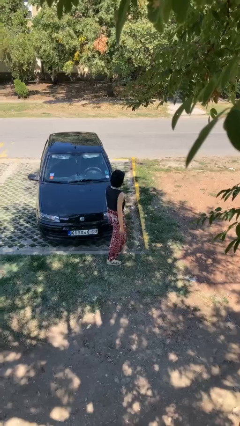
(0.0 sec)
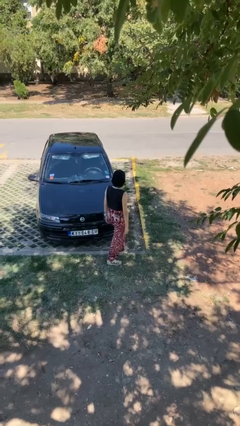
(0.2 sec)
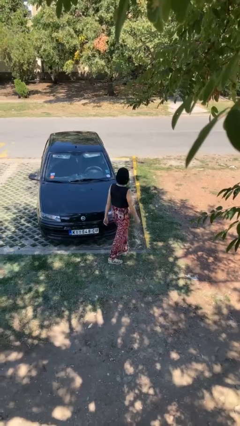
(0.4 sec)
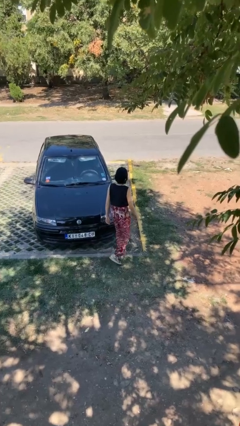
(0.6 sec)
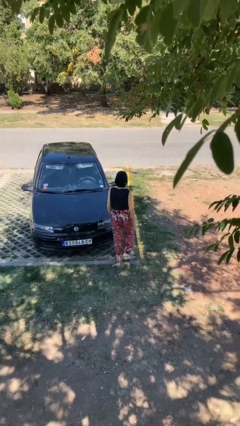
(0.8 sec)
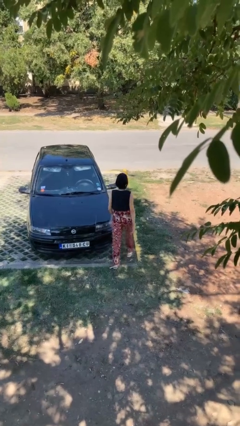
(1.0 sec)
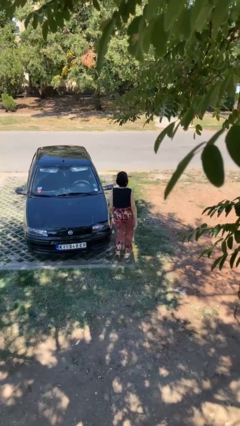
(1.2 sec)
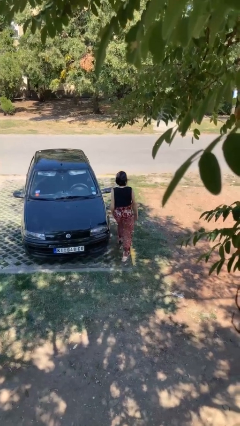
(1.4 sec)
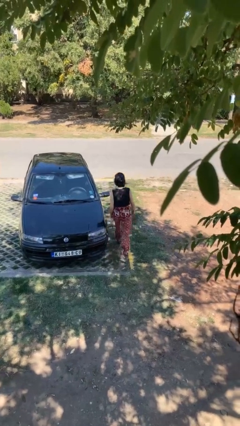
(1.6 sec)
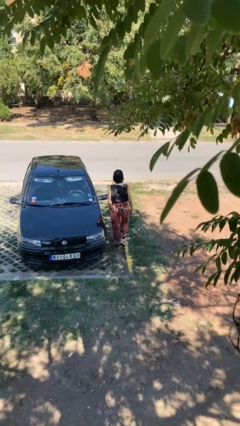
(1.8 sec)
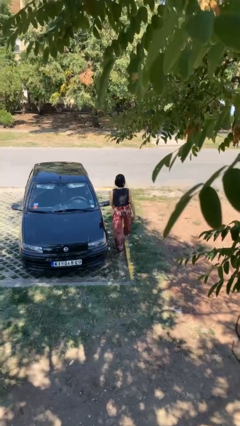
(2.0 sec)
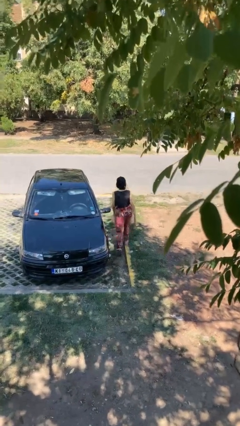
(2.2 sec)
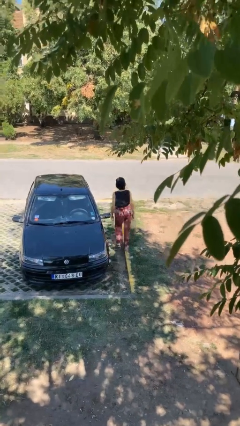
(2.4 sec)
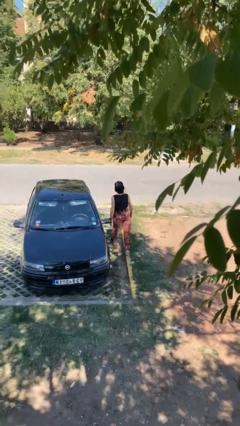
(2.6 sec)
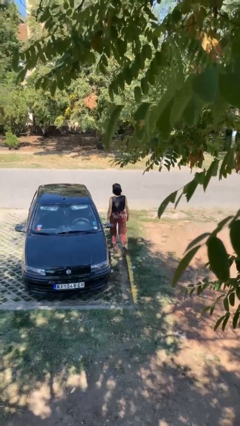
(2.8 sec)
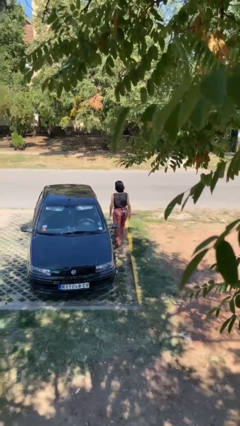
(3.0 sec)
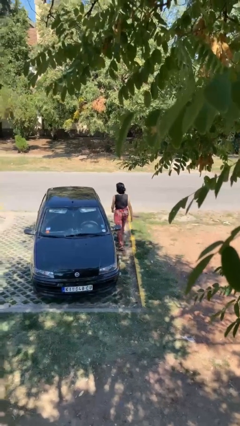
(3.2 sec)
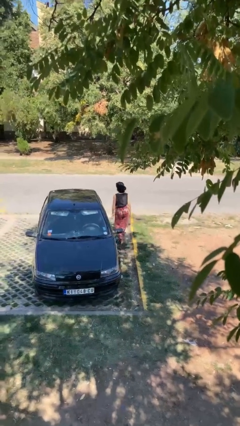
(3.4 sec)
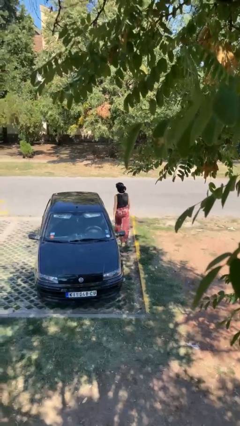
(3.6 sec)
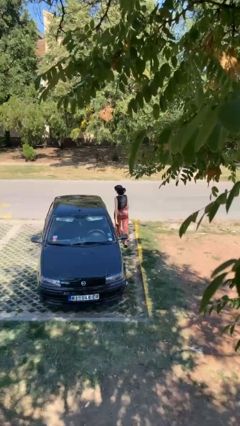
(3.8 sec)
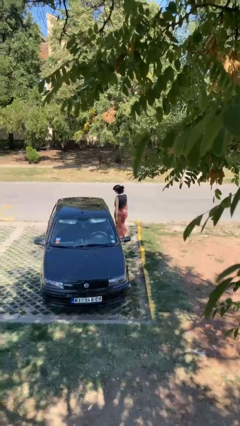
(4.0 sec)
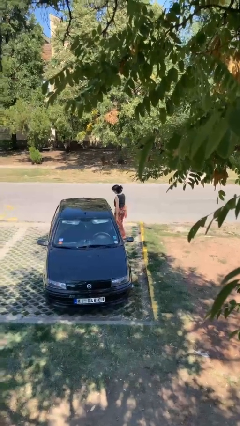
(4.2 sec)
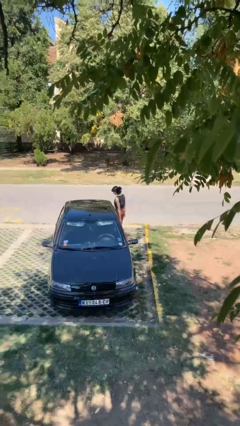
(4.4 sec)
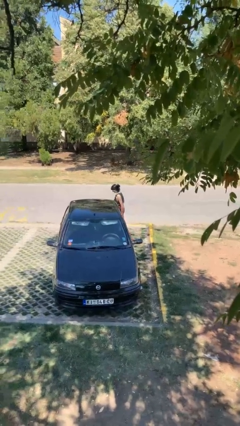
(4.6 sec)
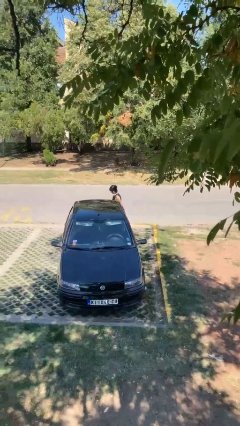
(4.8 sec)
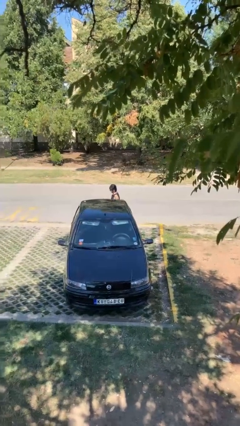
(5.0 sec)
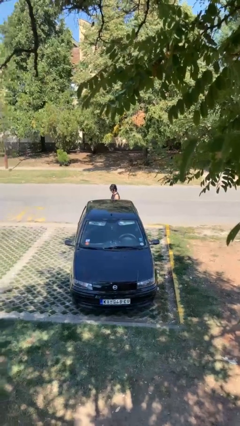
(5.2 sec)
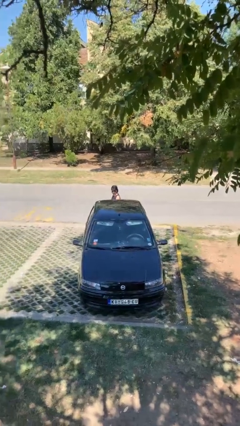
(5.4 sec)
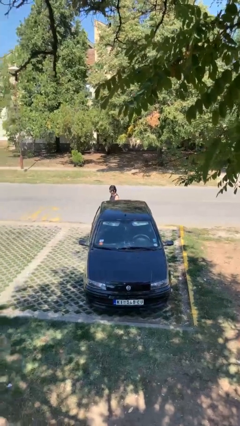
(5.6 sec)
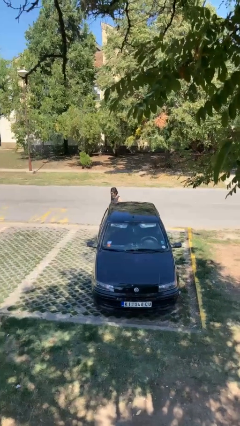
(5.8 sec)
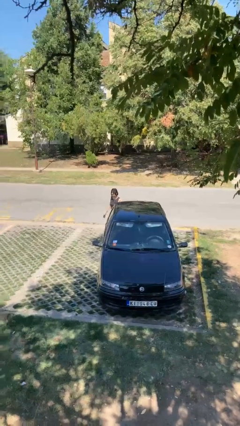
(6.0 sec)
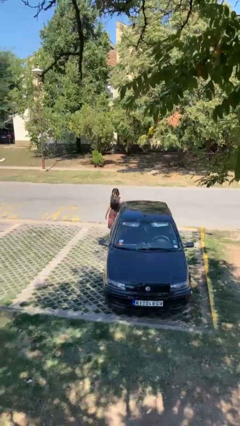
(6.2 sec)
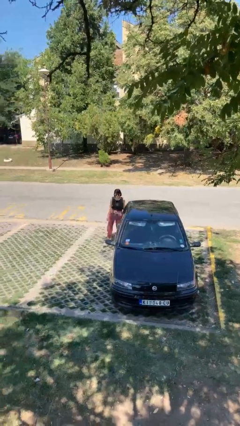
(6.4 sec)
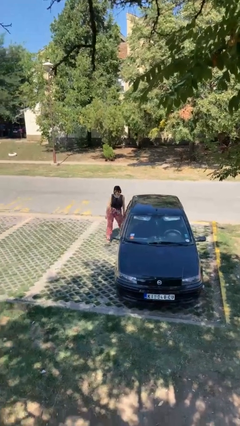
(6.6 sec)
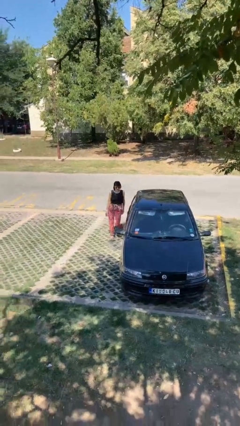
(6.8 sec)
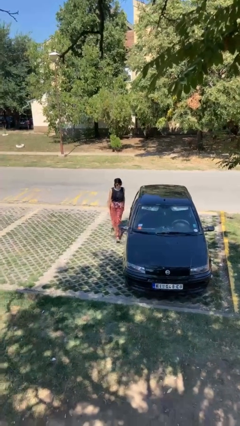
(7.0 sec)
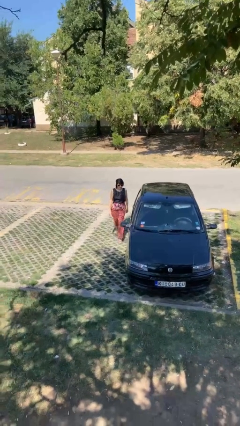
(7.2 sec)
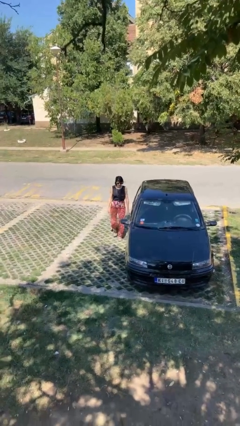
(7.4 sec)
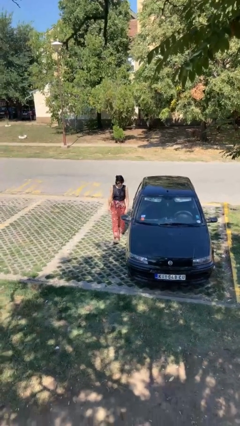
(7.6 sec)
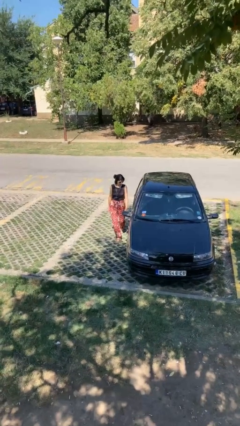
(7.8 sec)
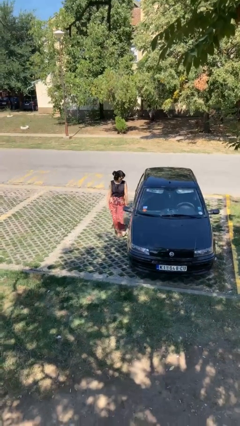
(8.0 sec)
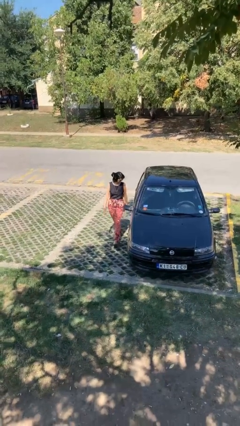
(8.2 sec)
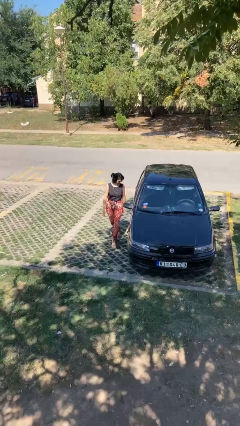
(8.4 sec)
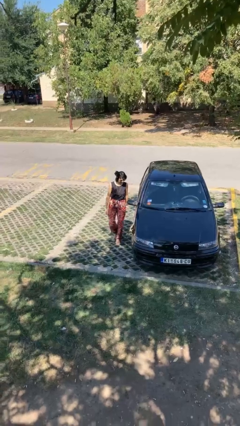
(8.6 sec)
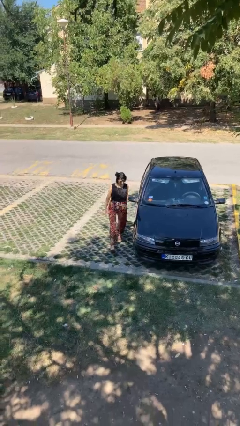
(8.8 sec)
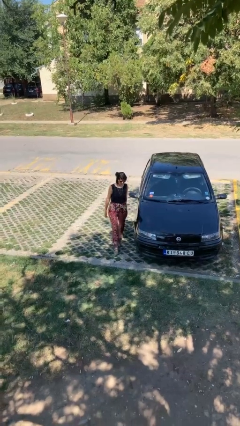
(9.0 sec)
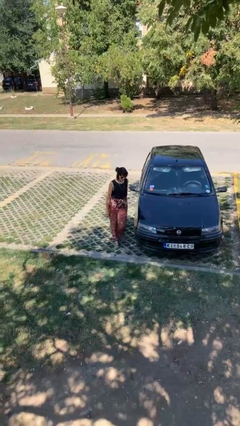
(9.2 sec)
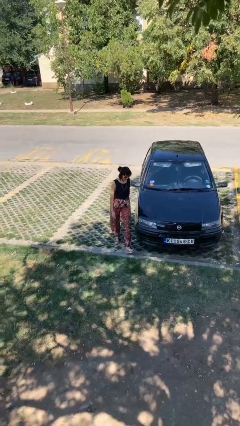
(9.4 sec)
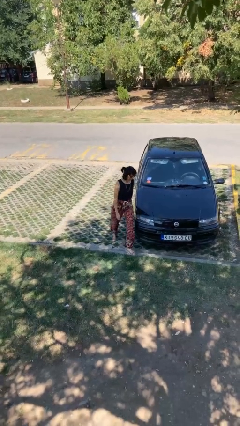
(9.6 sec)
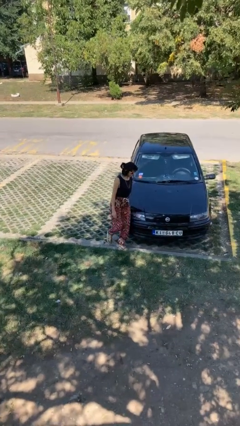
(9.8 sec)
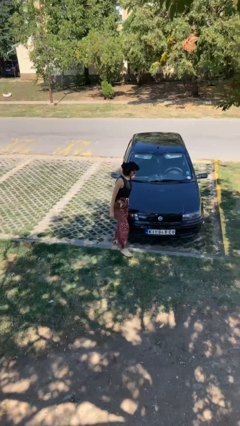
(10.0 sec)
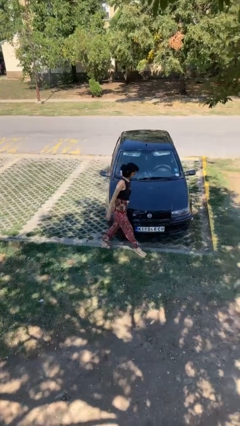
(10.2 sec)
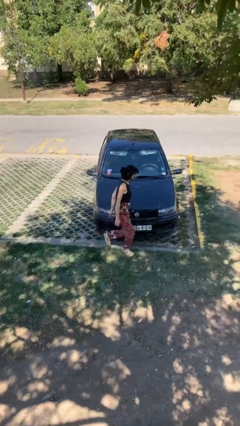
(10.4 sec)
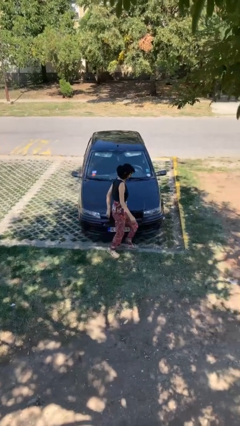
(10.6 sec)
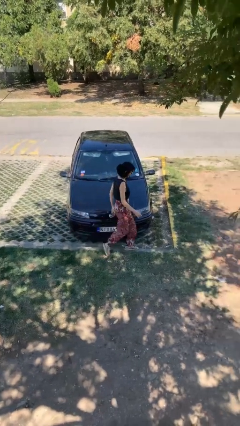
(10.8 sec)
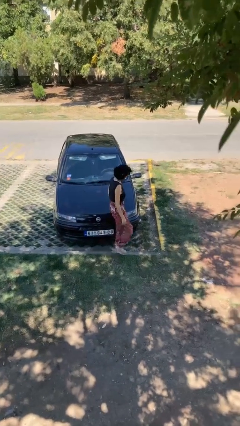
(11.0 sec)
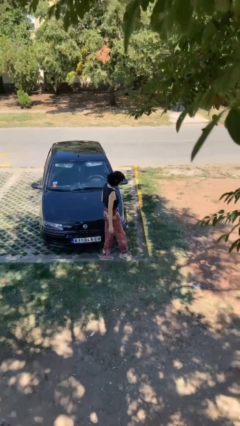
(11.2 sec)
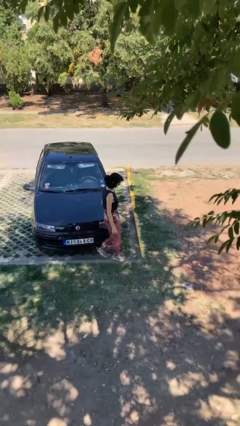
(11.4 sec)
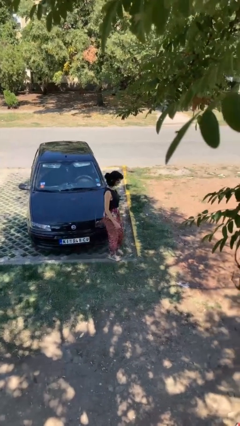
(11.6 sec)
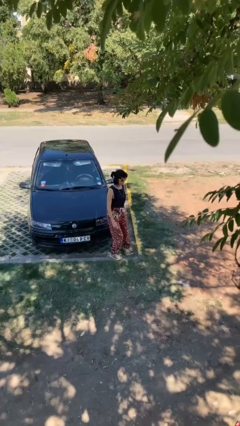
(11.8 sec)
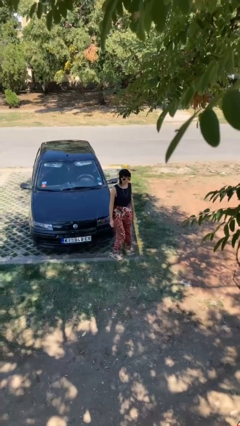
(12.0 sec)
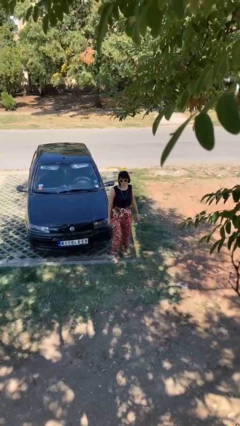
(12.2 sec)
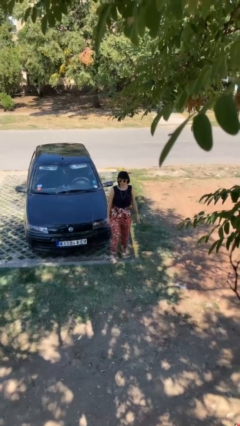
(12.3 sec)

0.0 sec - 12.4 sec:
person walks around car

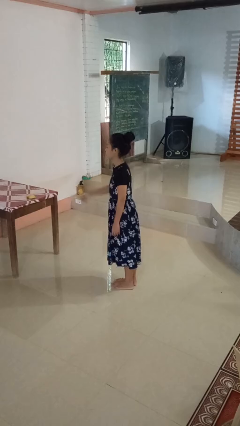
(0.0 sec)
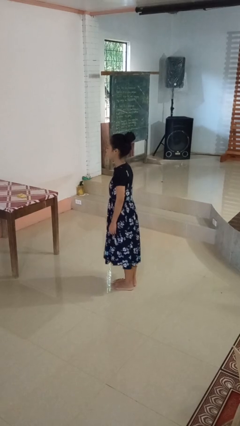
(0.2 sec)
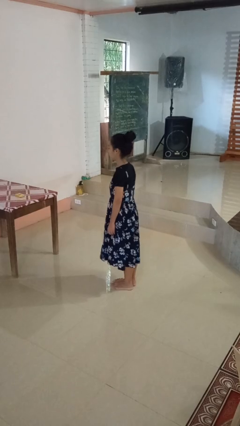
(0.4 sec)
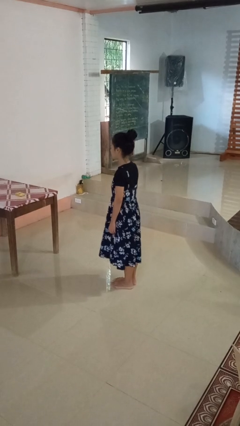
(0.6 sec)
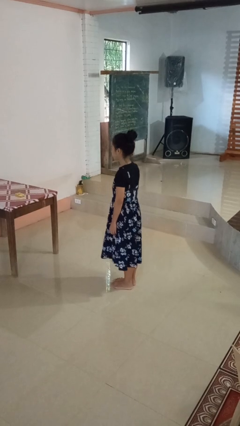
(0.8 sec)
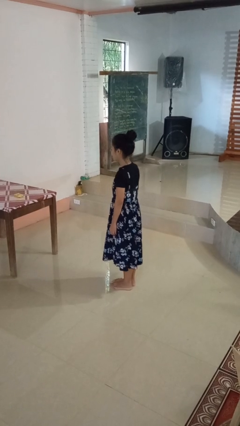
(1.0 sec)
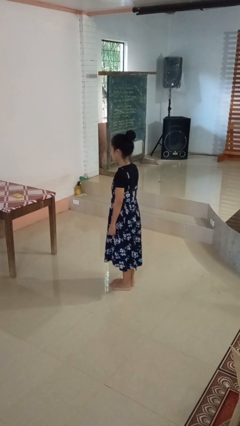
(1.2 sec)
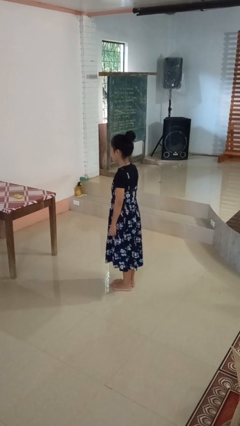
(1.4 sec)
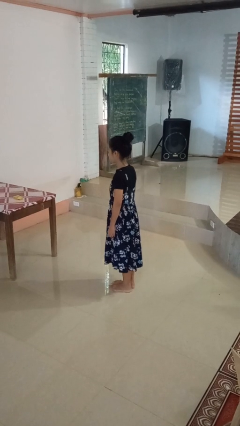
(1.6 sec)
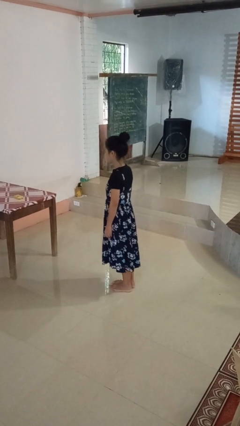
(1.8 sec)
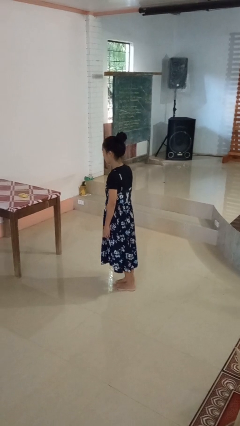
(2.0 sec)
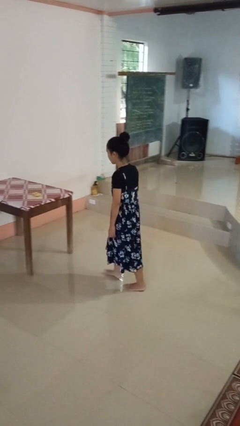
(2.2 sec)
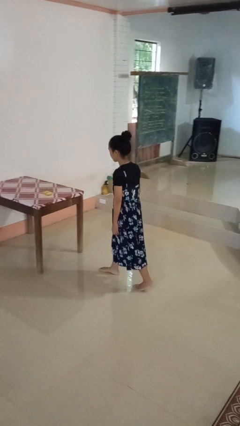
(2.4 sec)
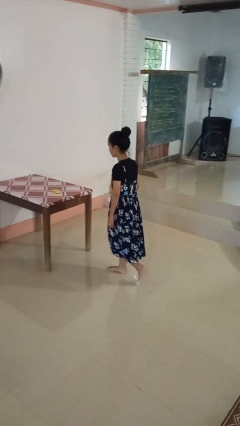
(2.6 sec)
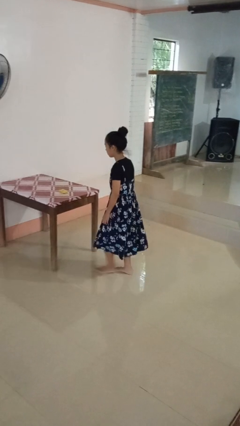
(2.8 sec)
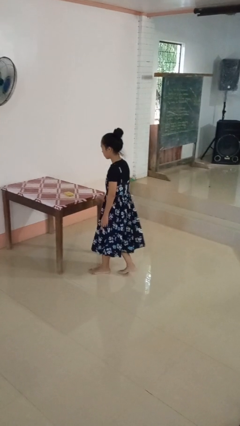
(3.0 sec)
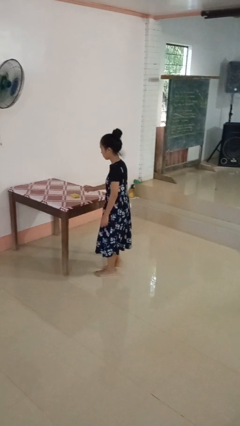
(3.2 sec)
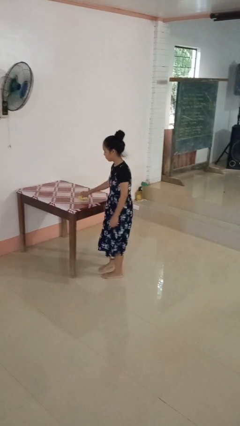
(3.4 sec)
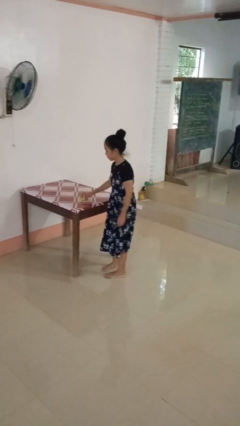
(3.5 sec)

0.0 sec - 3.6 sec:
person throws object on table

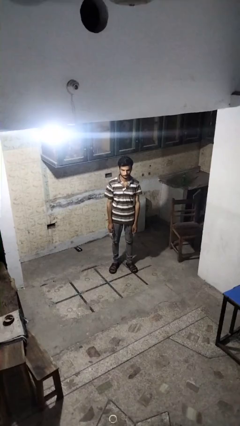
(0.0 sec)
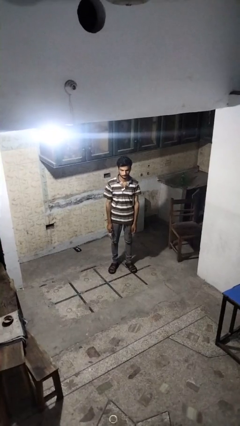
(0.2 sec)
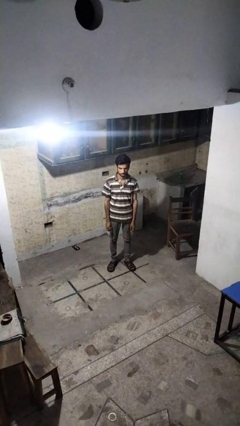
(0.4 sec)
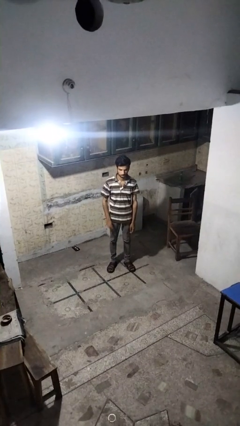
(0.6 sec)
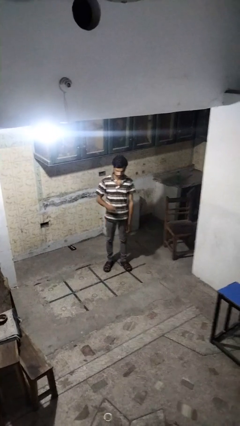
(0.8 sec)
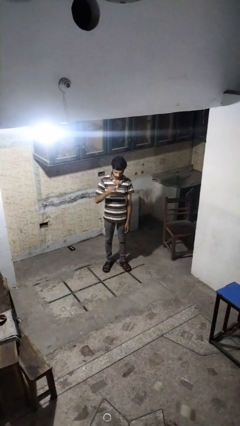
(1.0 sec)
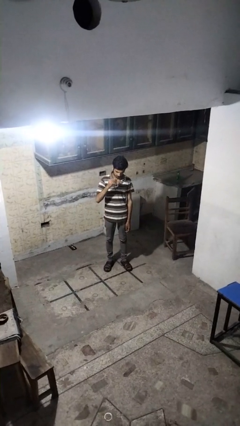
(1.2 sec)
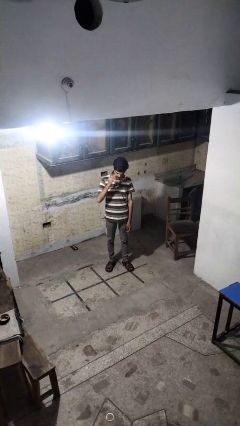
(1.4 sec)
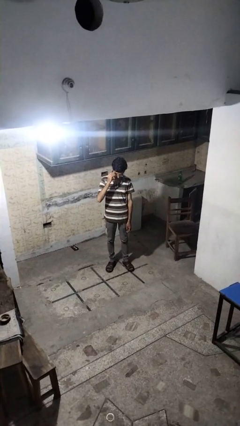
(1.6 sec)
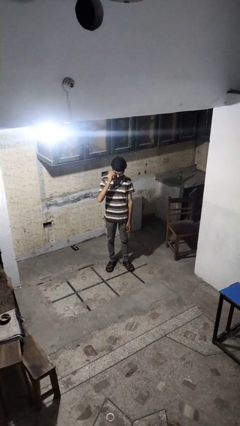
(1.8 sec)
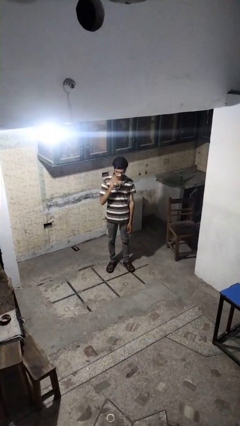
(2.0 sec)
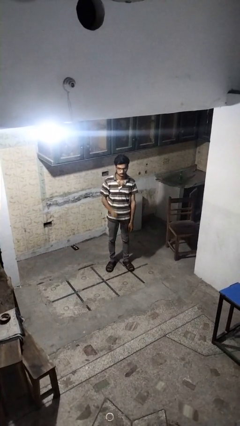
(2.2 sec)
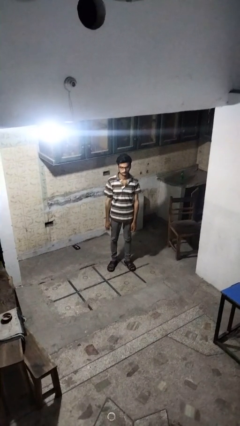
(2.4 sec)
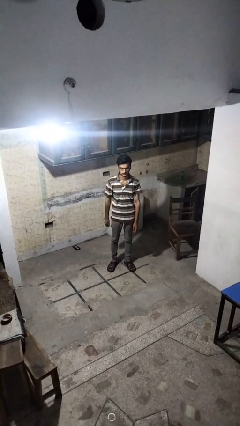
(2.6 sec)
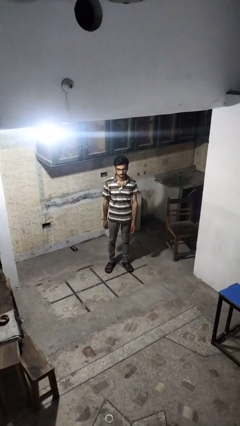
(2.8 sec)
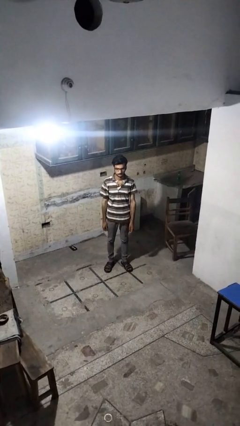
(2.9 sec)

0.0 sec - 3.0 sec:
person puts on glasses
